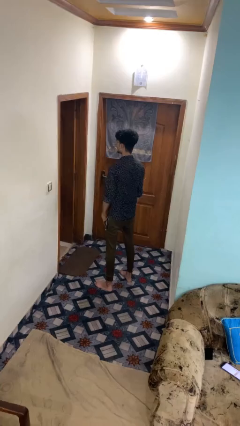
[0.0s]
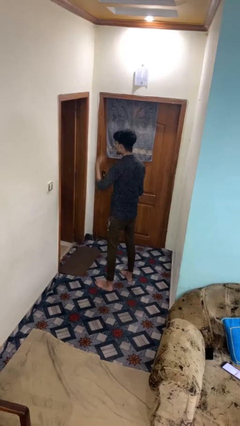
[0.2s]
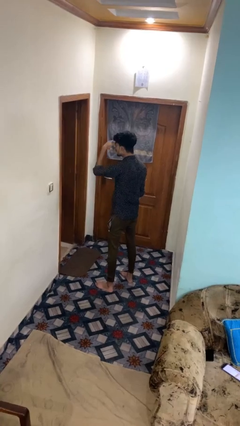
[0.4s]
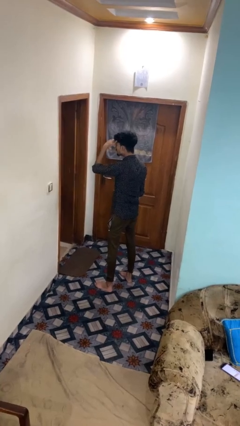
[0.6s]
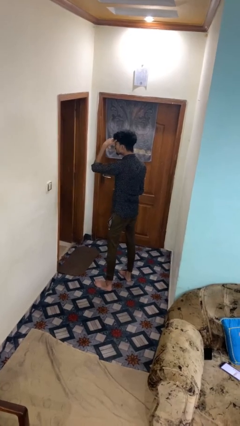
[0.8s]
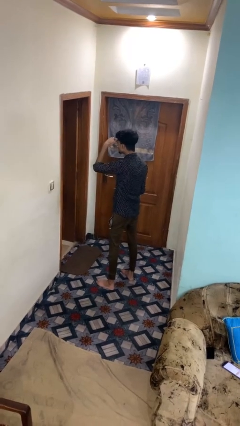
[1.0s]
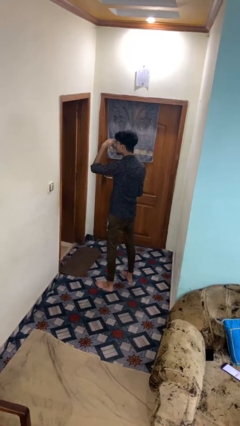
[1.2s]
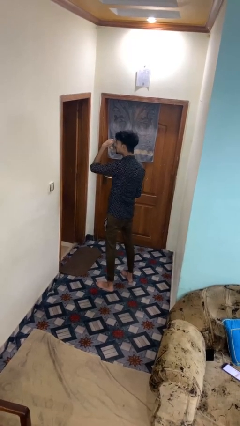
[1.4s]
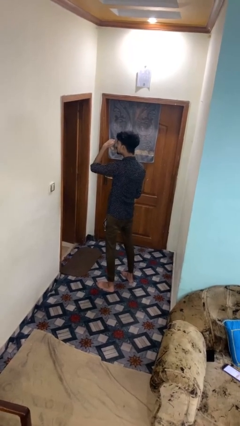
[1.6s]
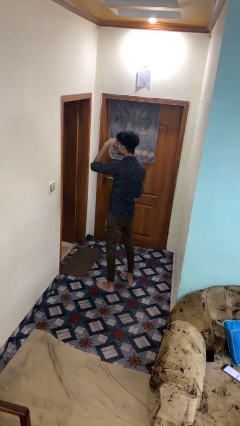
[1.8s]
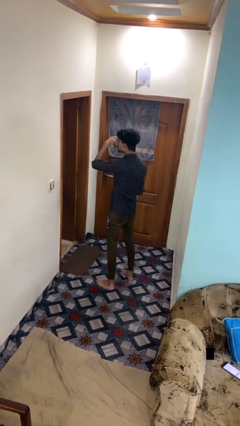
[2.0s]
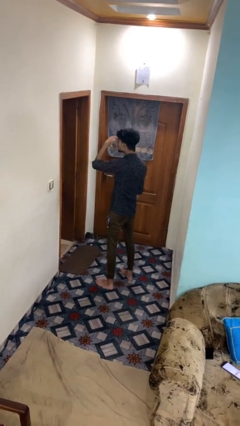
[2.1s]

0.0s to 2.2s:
person shades eyes

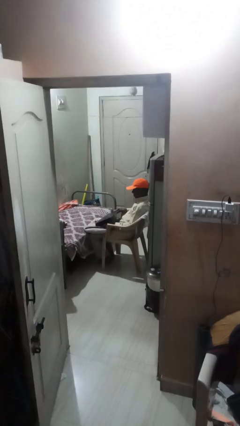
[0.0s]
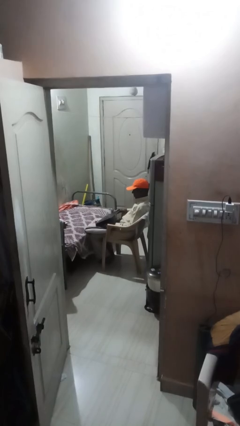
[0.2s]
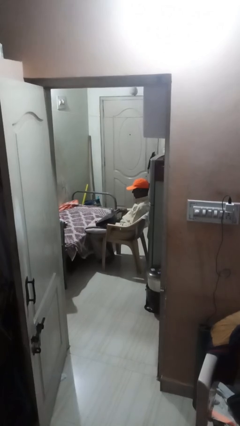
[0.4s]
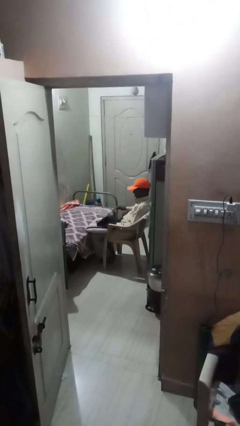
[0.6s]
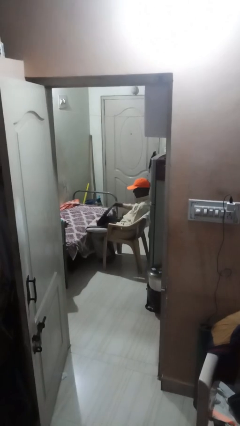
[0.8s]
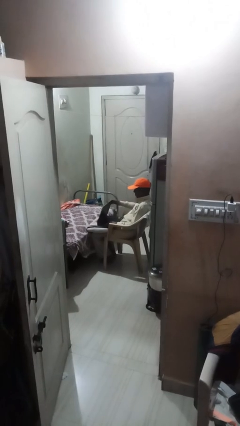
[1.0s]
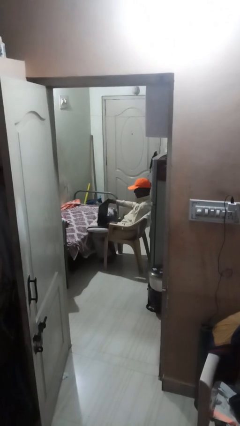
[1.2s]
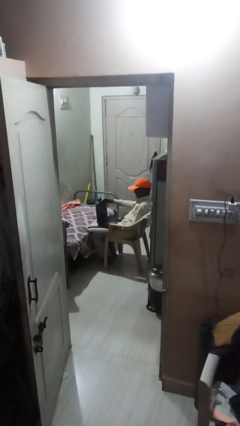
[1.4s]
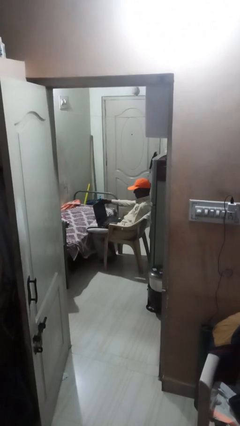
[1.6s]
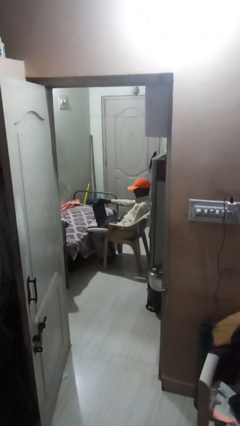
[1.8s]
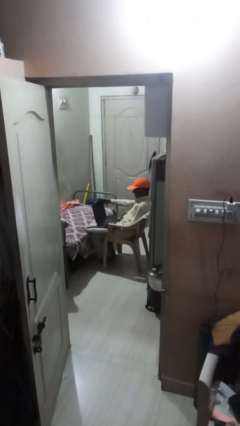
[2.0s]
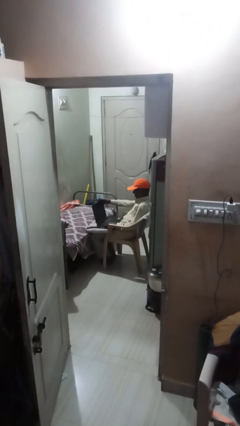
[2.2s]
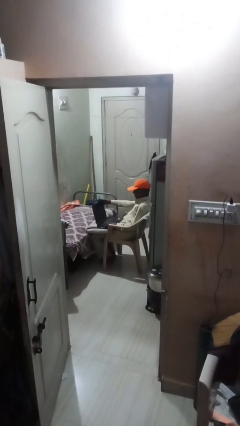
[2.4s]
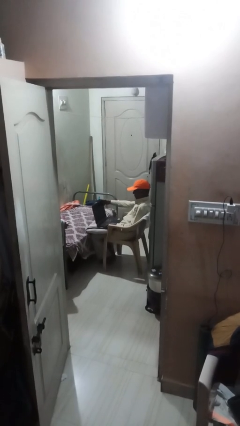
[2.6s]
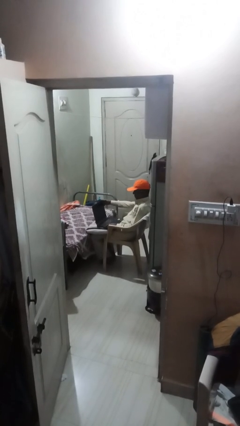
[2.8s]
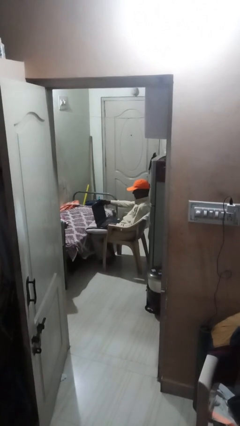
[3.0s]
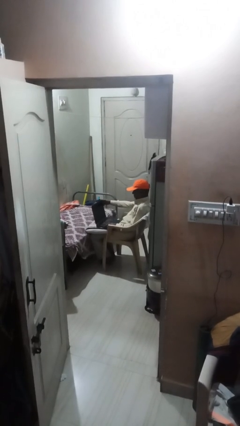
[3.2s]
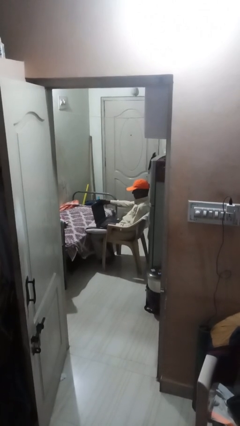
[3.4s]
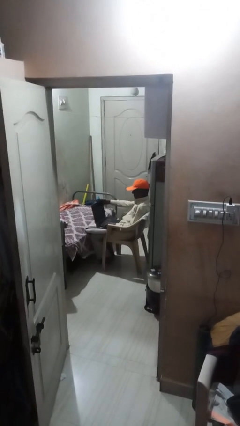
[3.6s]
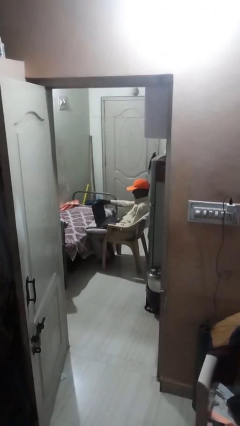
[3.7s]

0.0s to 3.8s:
person interacts with laptop

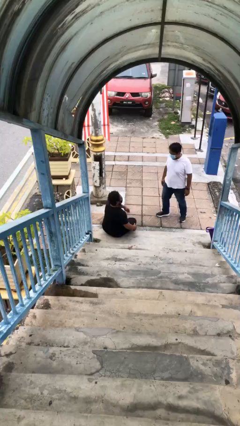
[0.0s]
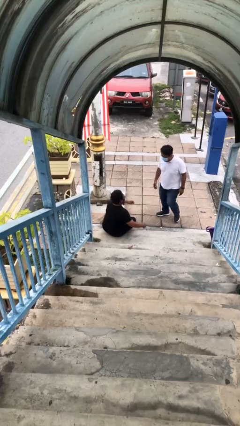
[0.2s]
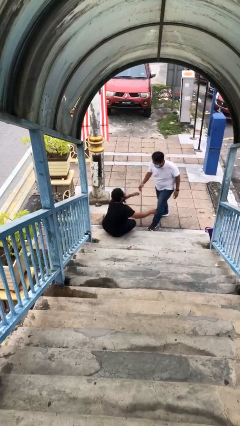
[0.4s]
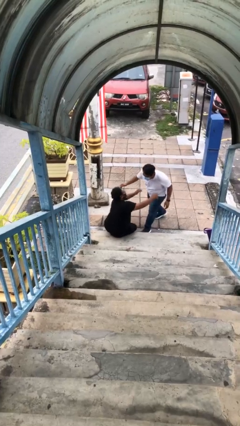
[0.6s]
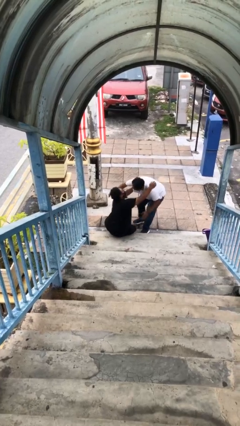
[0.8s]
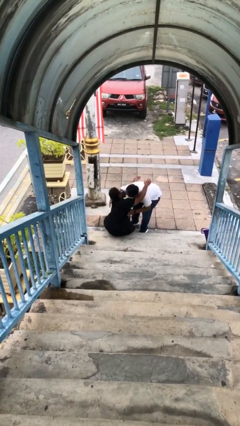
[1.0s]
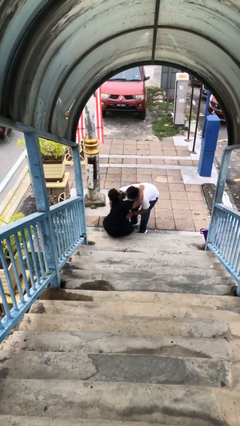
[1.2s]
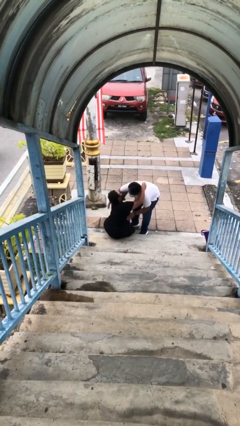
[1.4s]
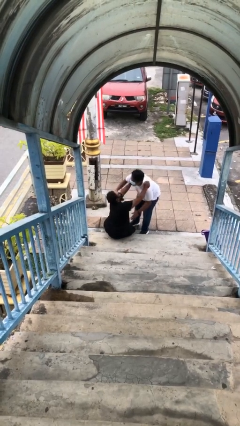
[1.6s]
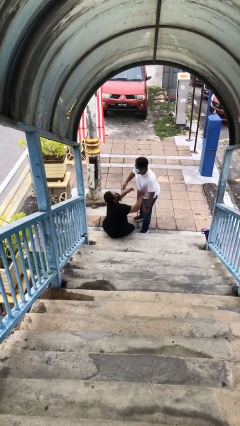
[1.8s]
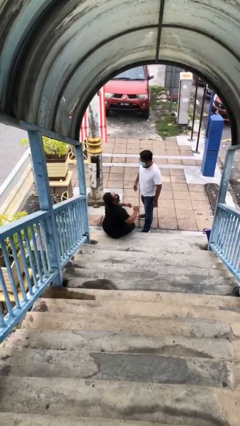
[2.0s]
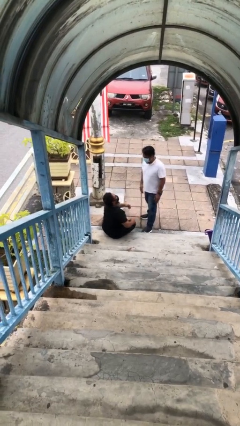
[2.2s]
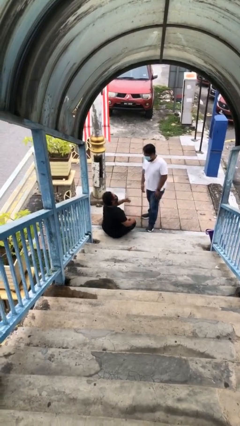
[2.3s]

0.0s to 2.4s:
person embraces person

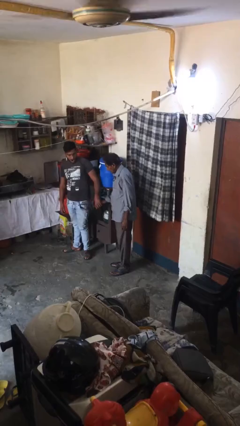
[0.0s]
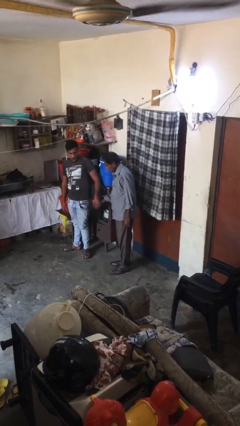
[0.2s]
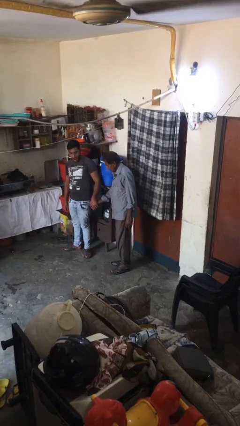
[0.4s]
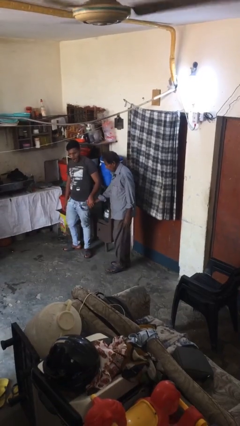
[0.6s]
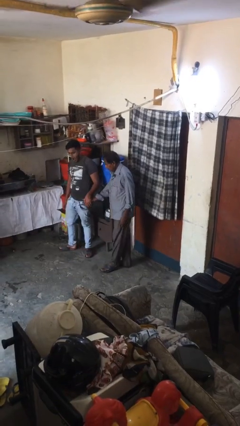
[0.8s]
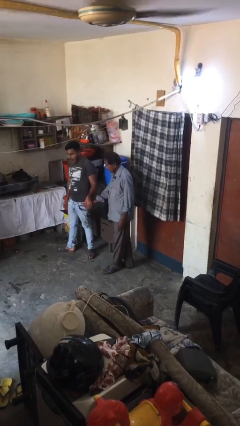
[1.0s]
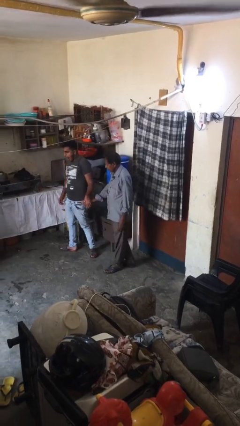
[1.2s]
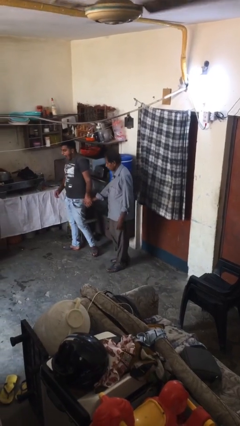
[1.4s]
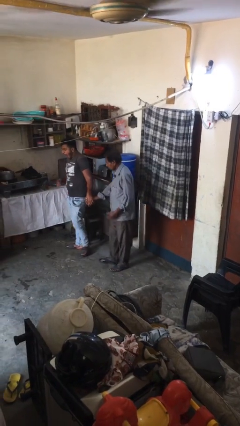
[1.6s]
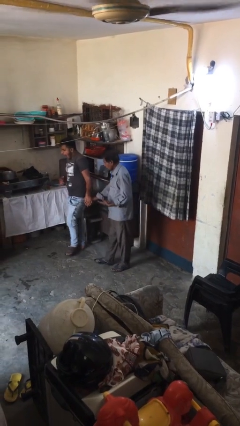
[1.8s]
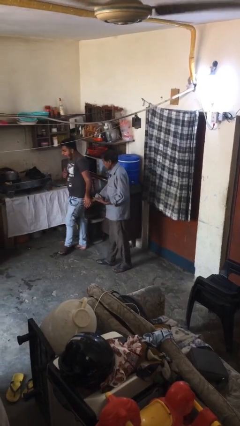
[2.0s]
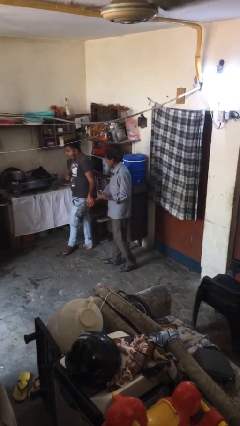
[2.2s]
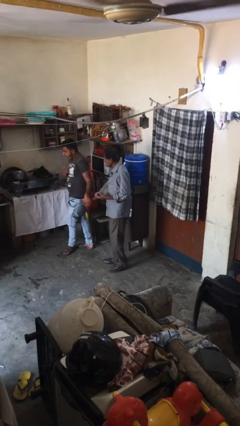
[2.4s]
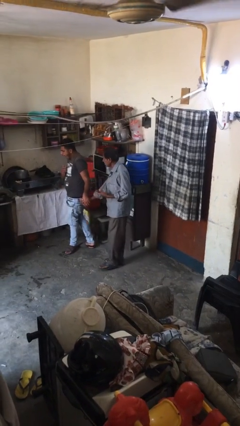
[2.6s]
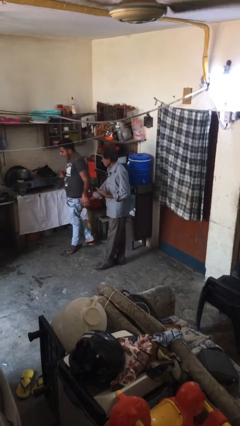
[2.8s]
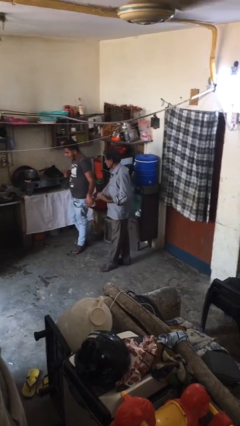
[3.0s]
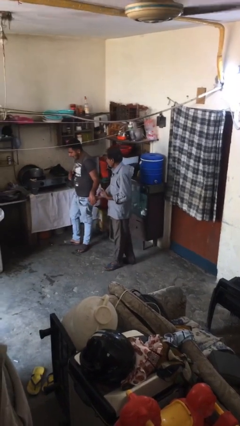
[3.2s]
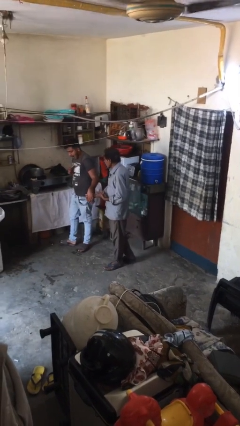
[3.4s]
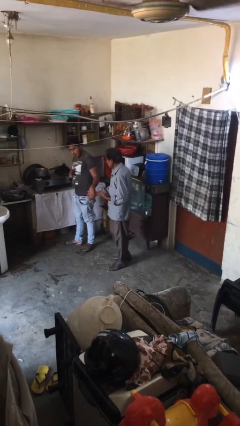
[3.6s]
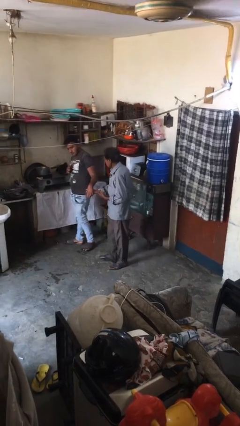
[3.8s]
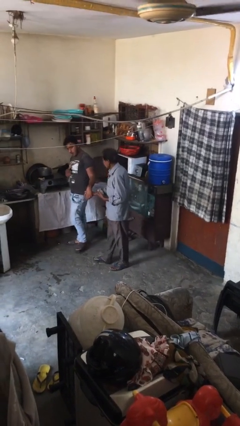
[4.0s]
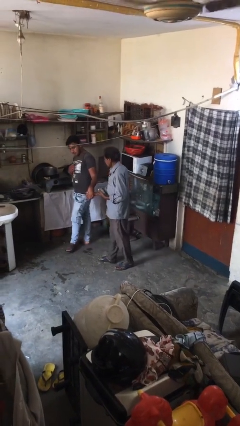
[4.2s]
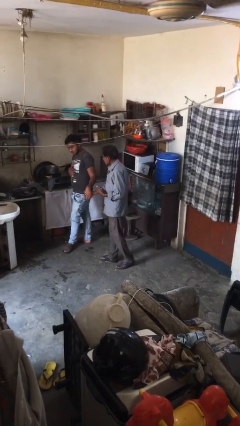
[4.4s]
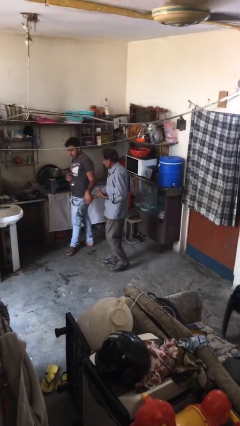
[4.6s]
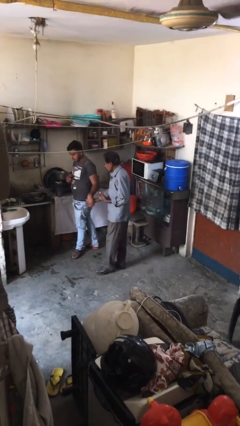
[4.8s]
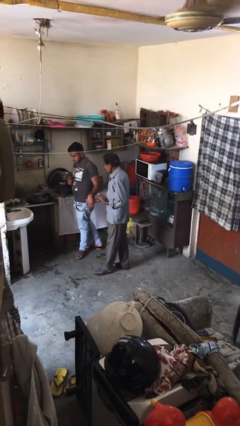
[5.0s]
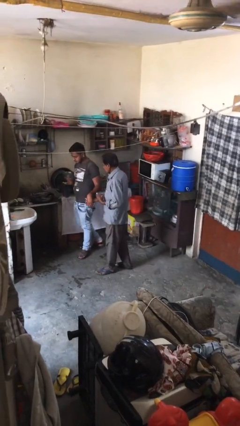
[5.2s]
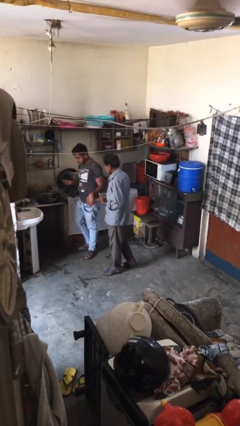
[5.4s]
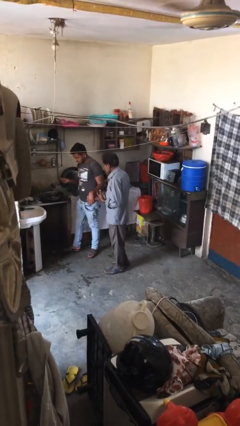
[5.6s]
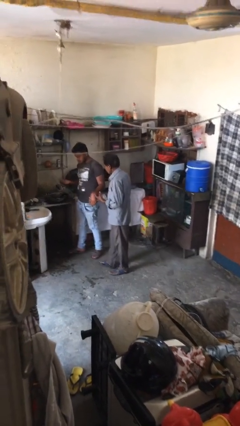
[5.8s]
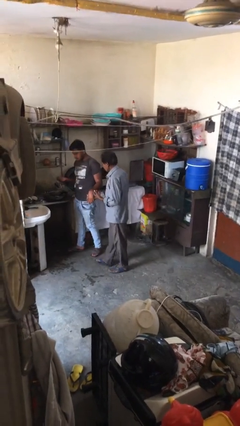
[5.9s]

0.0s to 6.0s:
person holds hand

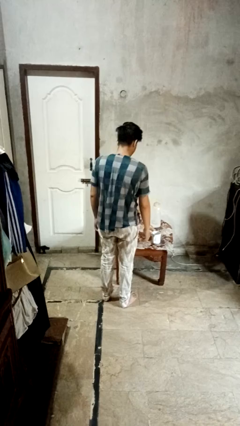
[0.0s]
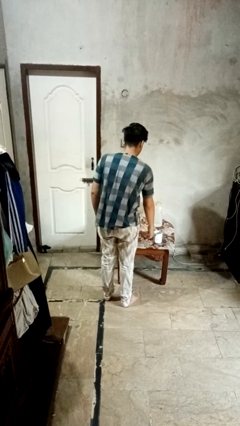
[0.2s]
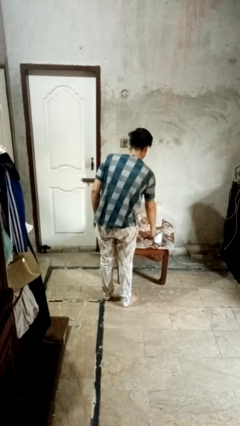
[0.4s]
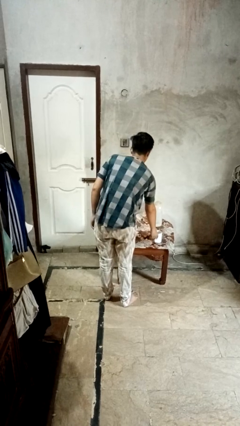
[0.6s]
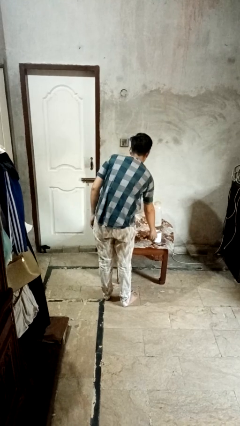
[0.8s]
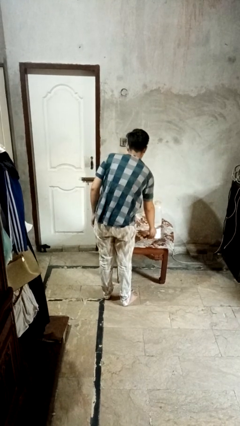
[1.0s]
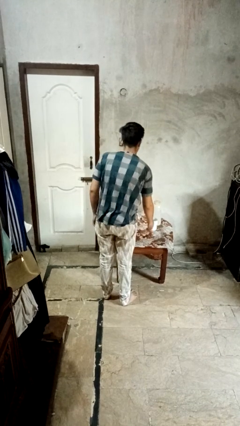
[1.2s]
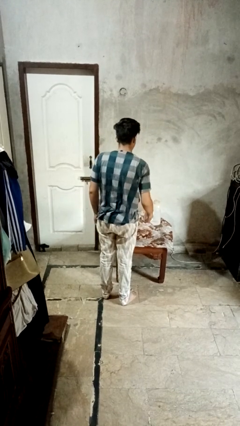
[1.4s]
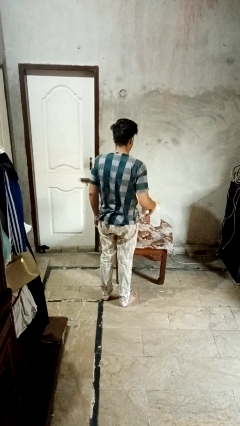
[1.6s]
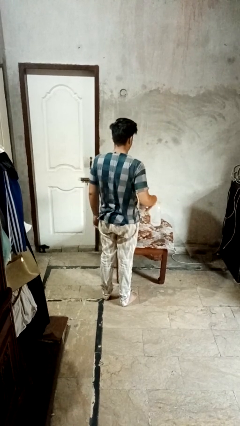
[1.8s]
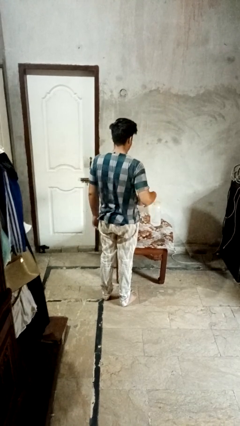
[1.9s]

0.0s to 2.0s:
person picks up object from table

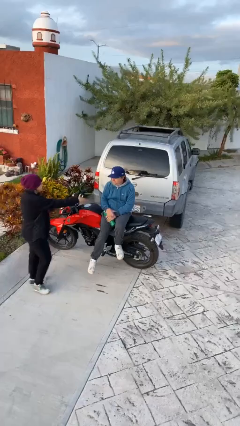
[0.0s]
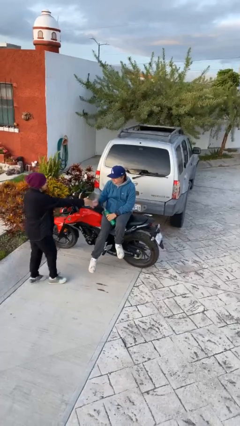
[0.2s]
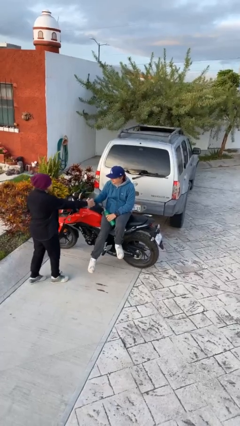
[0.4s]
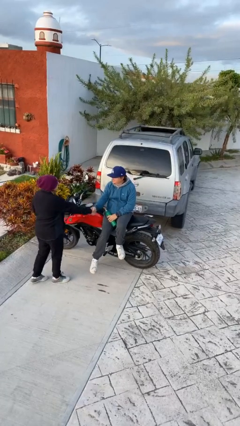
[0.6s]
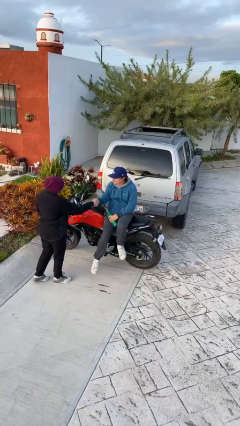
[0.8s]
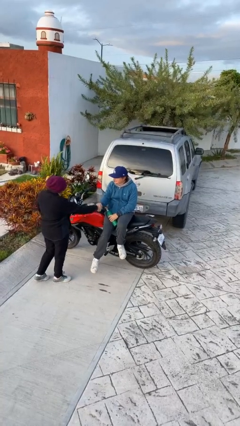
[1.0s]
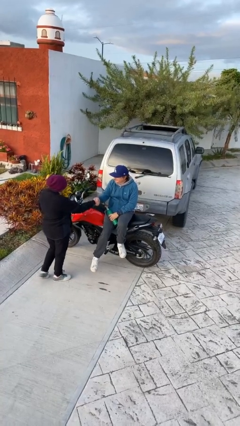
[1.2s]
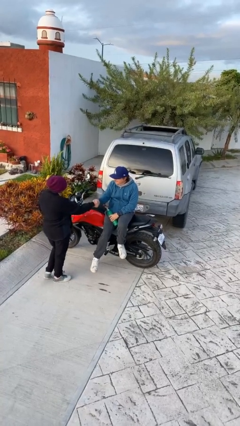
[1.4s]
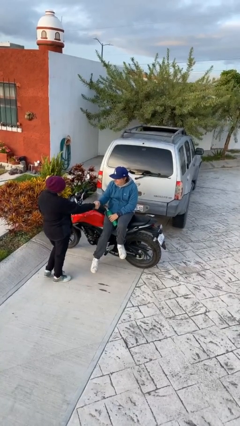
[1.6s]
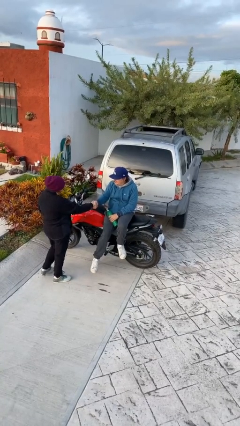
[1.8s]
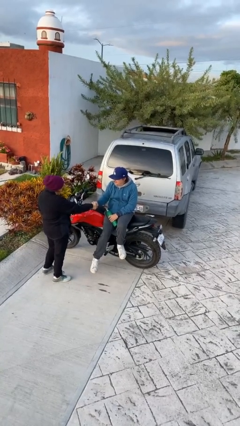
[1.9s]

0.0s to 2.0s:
person shakes hand
